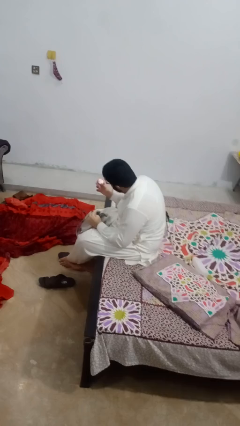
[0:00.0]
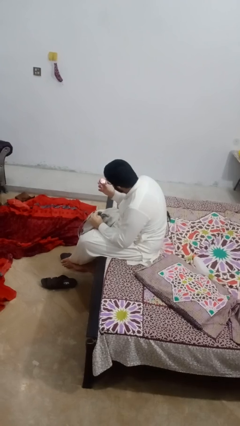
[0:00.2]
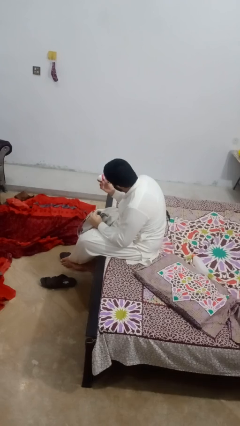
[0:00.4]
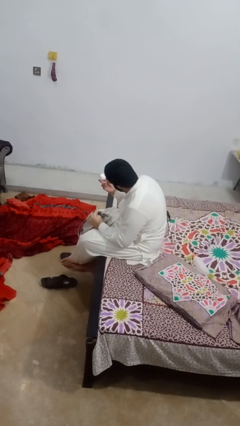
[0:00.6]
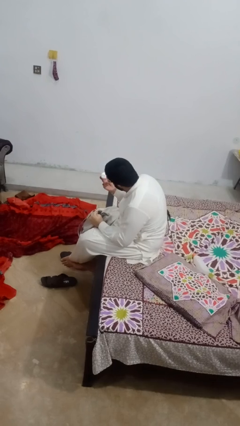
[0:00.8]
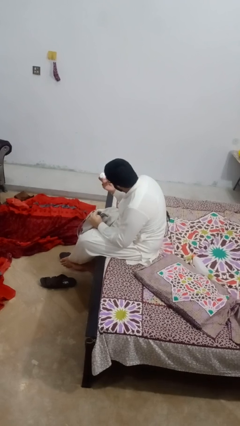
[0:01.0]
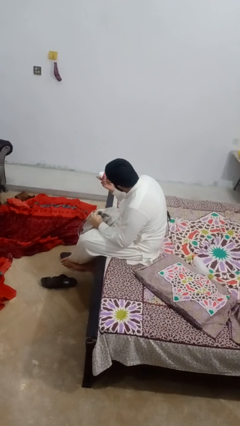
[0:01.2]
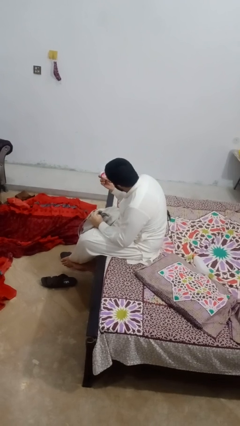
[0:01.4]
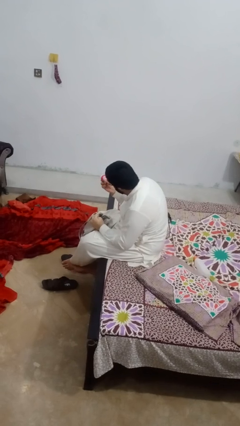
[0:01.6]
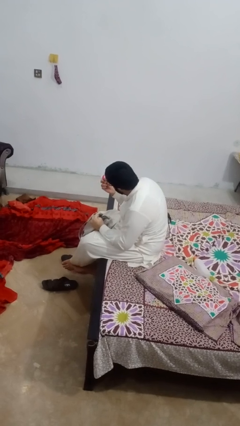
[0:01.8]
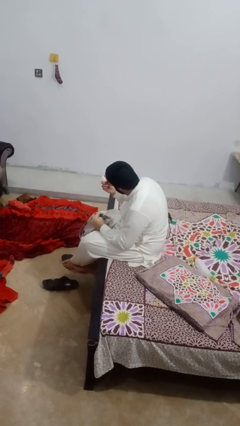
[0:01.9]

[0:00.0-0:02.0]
person takes object from purse

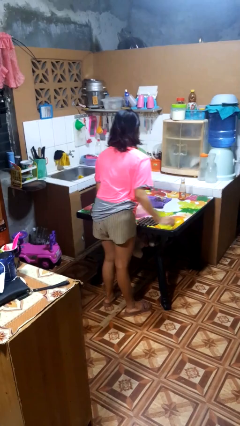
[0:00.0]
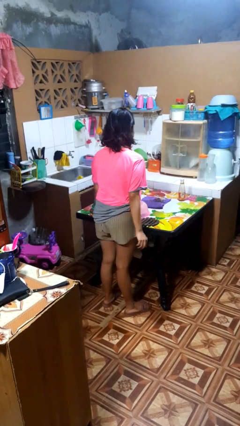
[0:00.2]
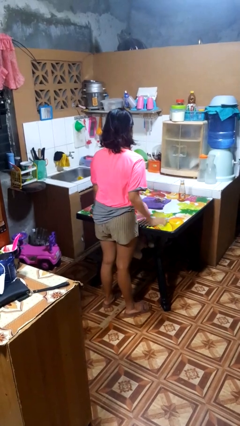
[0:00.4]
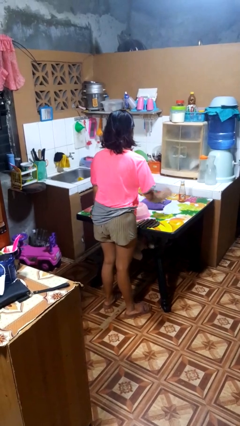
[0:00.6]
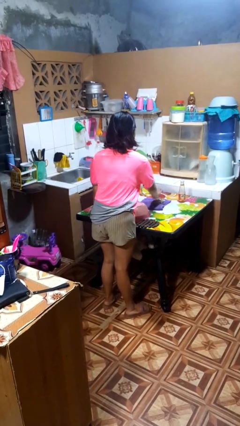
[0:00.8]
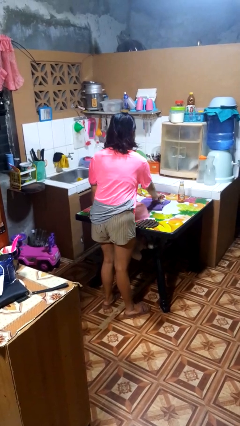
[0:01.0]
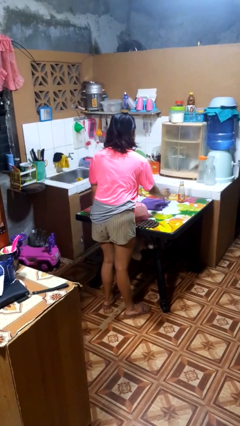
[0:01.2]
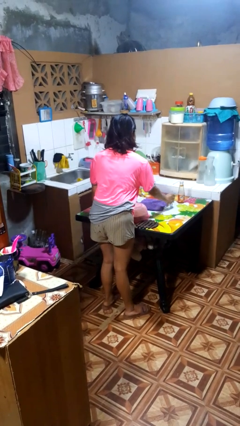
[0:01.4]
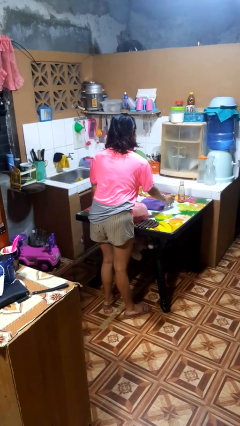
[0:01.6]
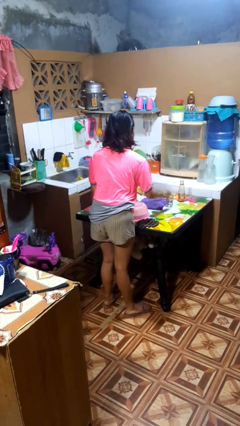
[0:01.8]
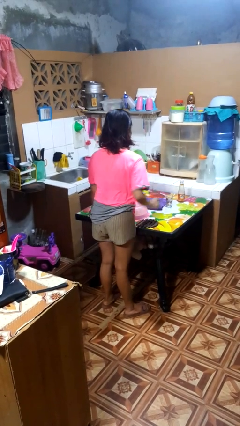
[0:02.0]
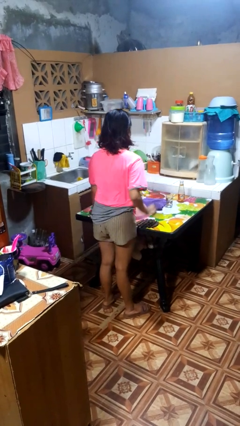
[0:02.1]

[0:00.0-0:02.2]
person sets upright glass

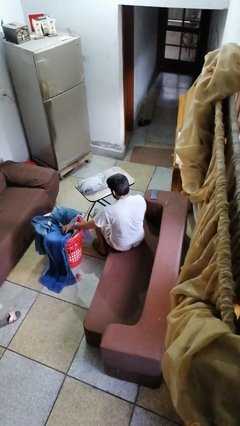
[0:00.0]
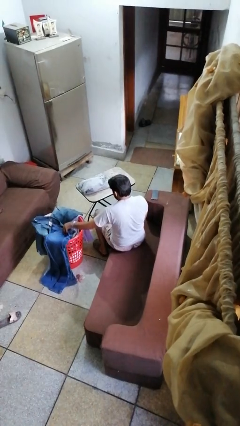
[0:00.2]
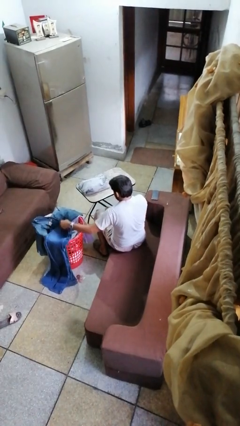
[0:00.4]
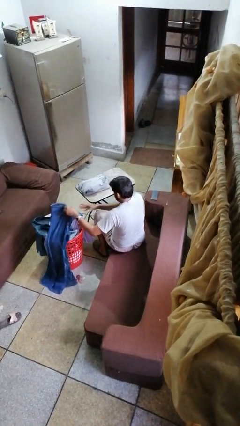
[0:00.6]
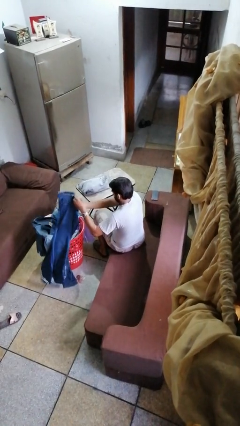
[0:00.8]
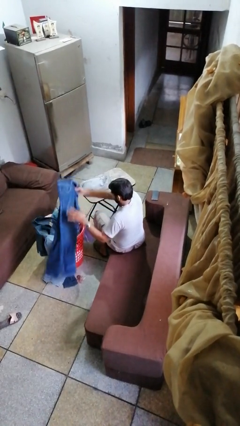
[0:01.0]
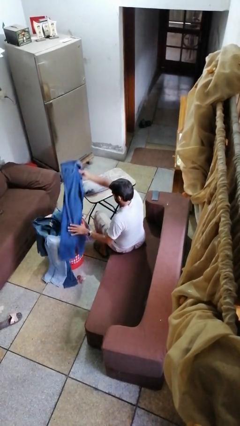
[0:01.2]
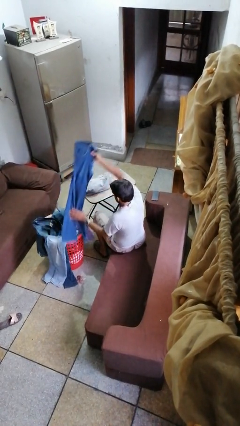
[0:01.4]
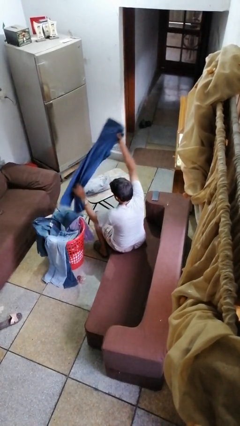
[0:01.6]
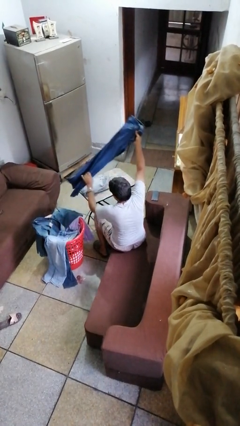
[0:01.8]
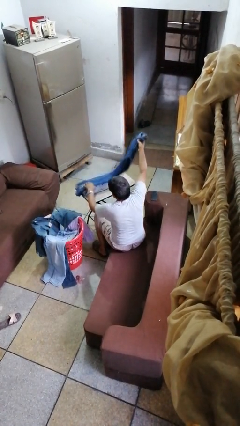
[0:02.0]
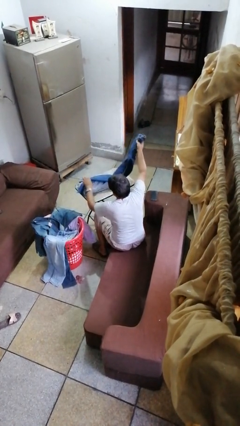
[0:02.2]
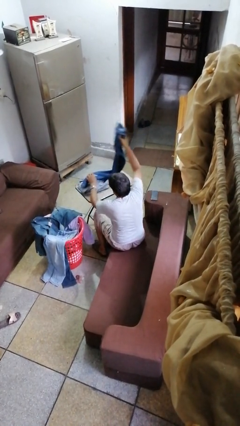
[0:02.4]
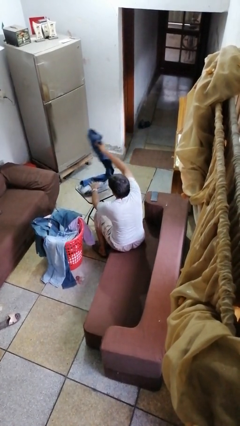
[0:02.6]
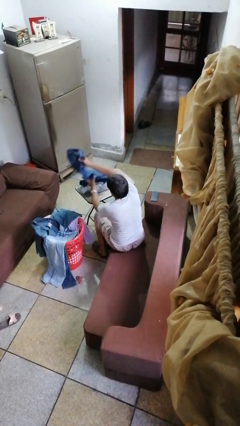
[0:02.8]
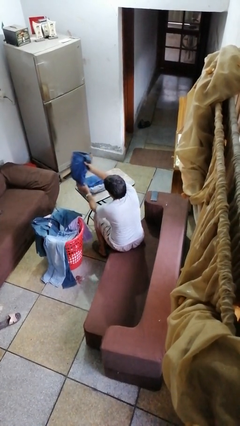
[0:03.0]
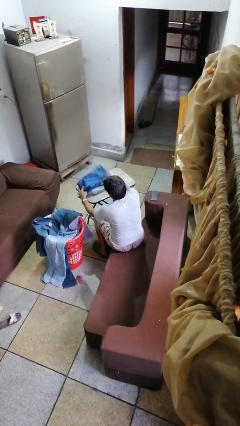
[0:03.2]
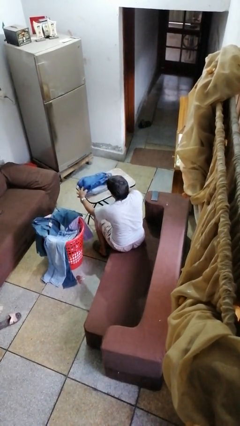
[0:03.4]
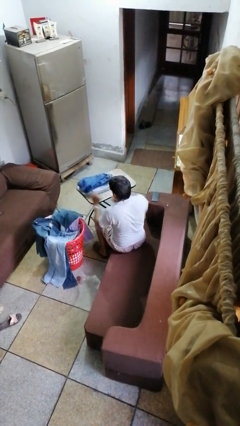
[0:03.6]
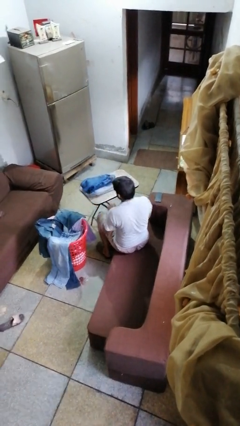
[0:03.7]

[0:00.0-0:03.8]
person folds pants

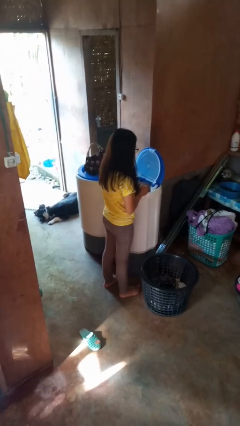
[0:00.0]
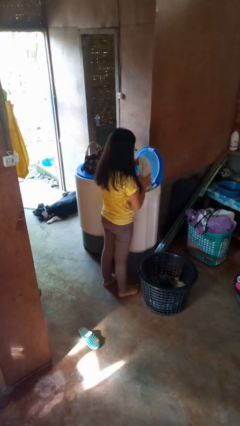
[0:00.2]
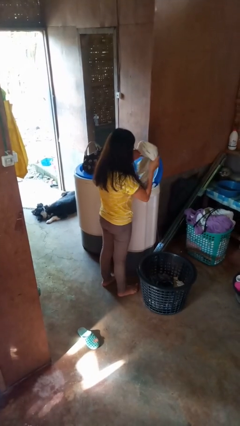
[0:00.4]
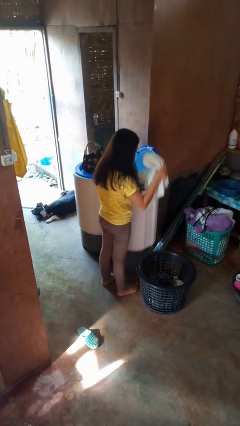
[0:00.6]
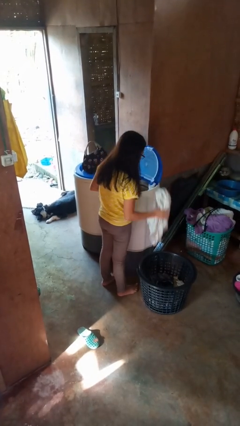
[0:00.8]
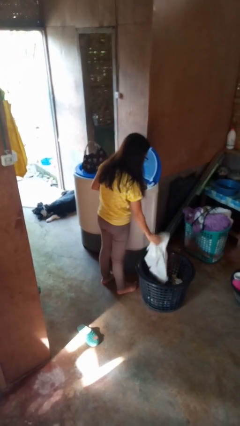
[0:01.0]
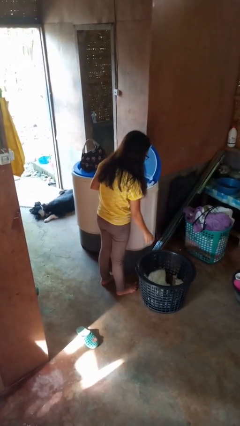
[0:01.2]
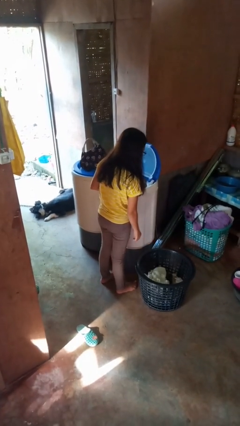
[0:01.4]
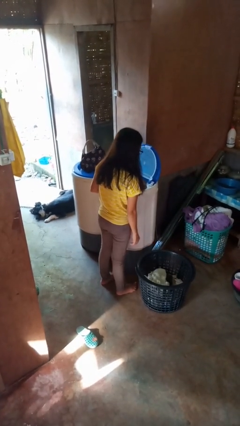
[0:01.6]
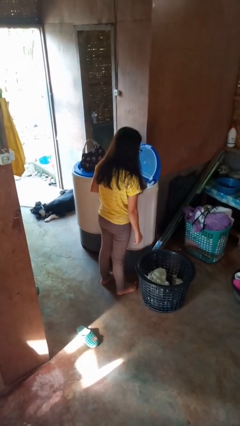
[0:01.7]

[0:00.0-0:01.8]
person unloads clotheswasher

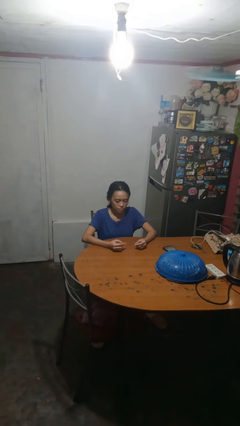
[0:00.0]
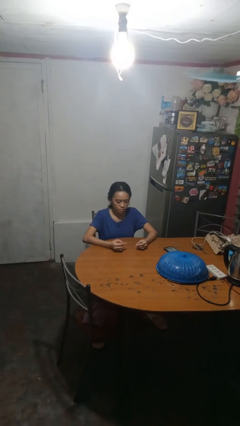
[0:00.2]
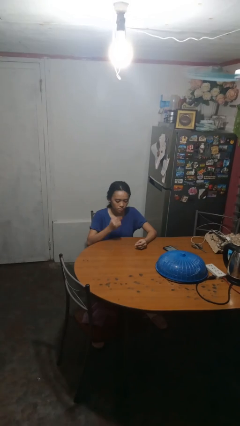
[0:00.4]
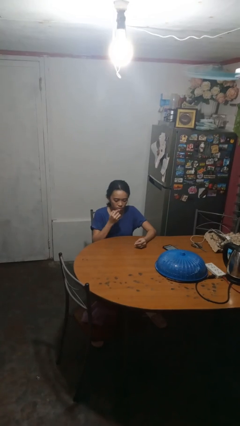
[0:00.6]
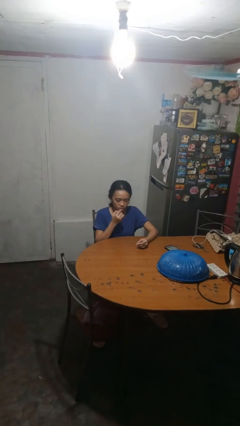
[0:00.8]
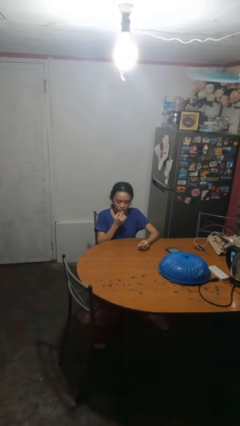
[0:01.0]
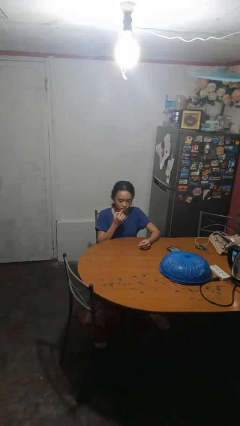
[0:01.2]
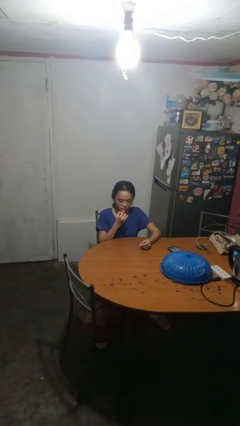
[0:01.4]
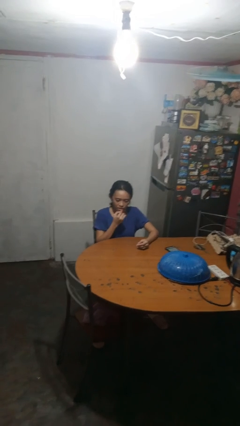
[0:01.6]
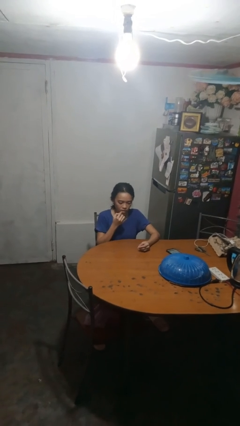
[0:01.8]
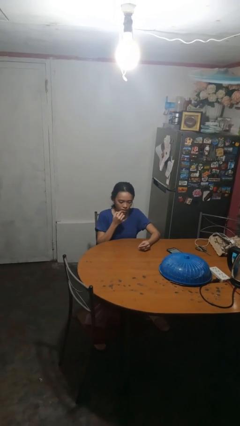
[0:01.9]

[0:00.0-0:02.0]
person applies lip makeup

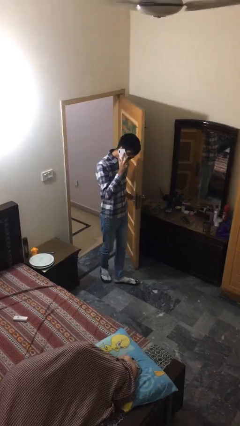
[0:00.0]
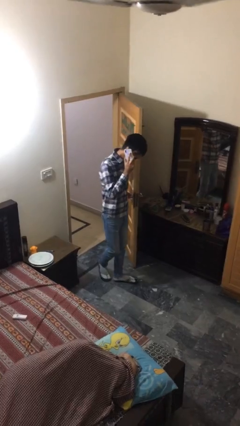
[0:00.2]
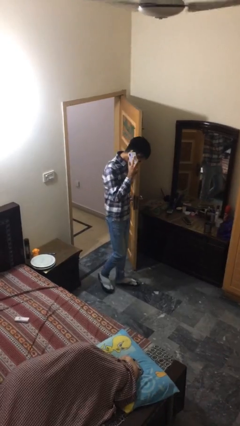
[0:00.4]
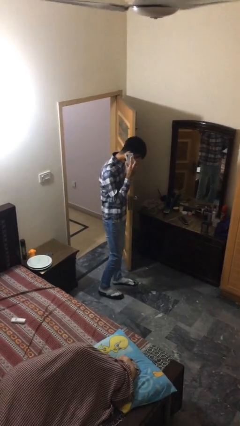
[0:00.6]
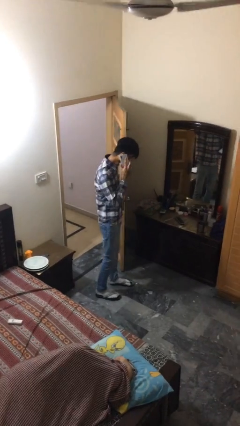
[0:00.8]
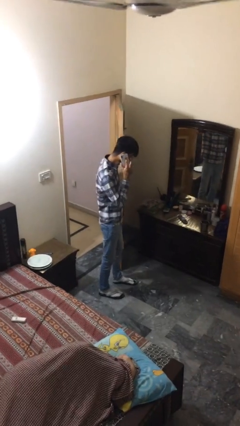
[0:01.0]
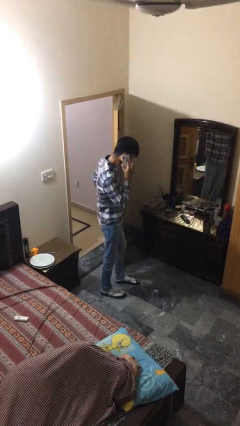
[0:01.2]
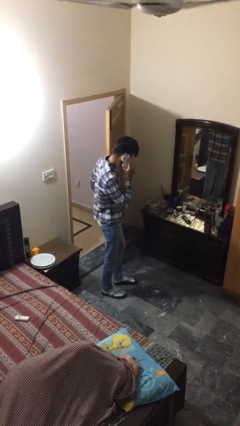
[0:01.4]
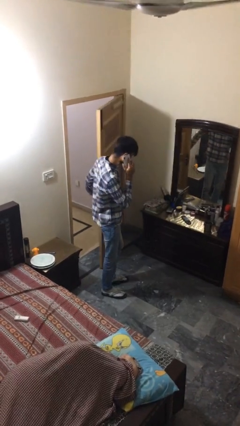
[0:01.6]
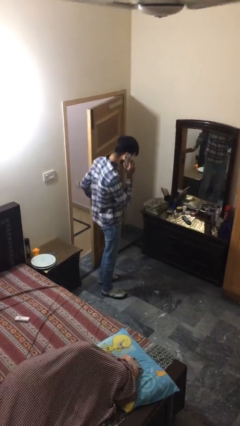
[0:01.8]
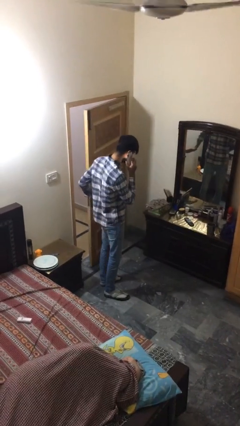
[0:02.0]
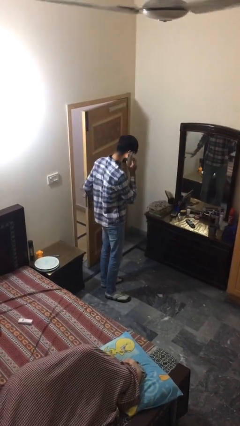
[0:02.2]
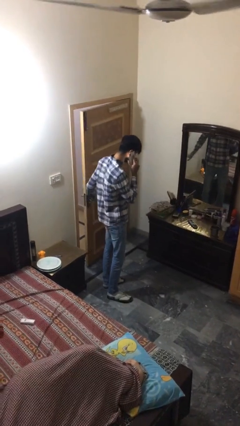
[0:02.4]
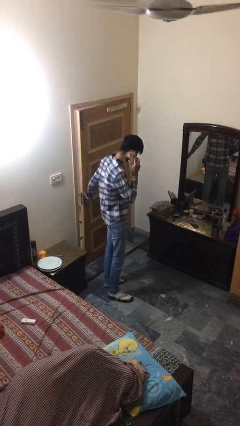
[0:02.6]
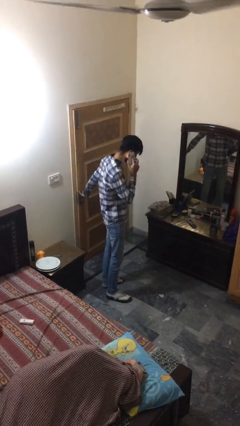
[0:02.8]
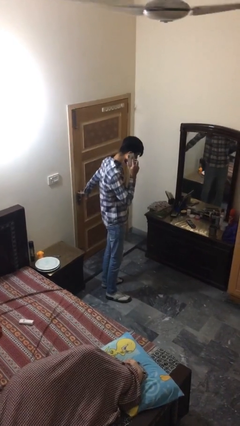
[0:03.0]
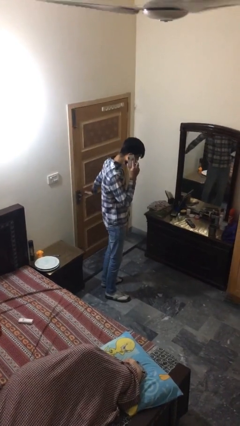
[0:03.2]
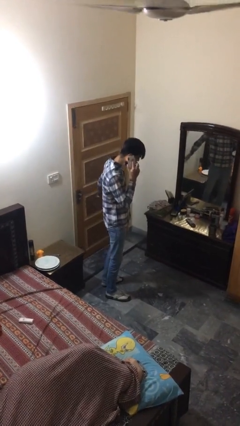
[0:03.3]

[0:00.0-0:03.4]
person closes facility door

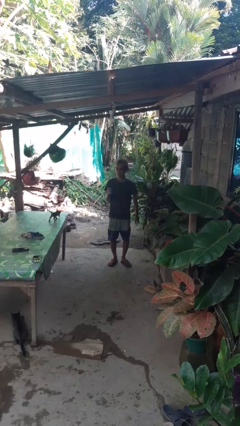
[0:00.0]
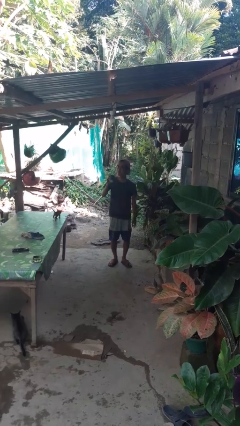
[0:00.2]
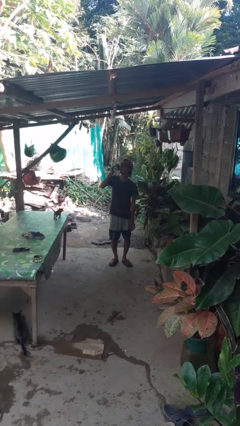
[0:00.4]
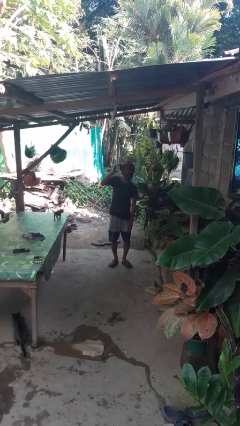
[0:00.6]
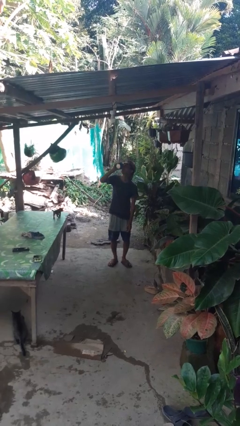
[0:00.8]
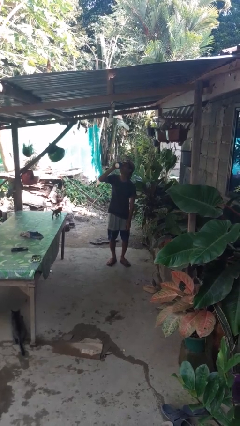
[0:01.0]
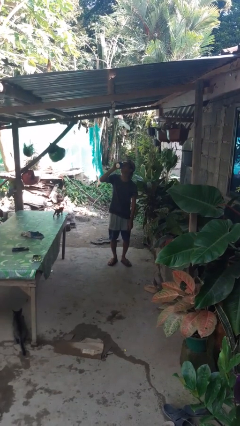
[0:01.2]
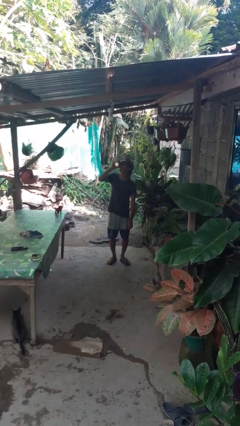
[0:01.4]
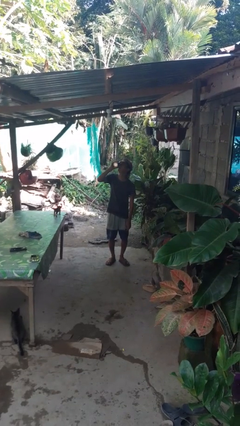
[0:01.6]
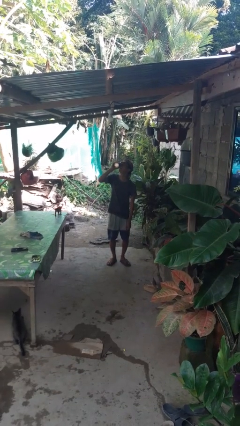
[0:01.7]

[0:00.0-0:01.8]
person drinks from beverage can

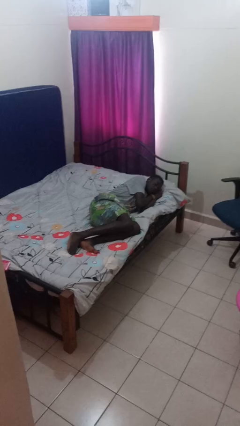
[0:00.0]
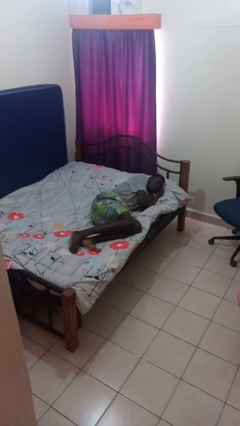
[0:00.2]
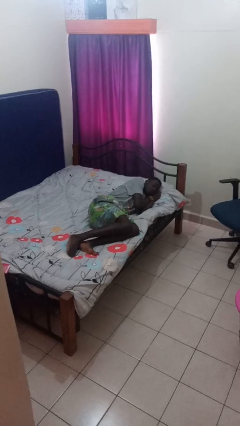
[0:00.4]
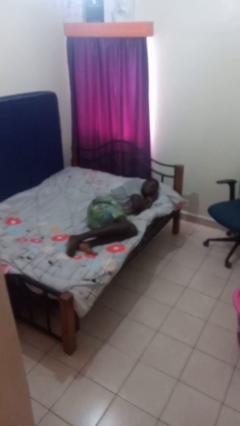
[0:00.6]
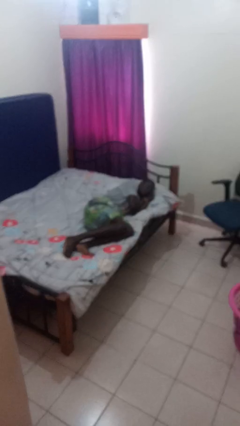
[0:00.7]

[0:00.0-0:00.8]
person stands up
